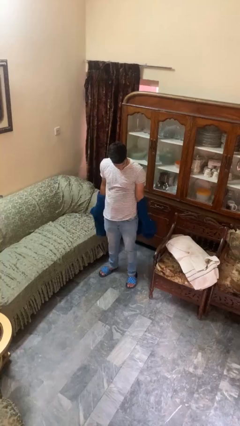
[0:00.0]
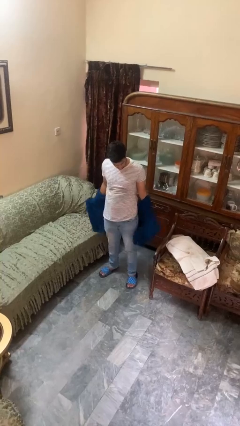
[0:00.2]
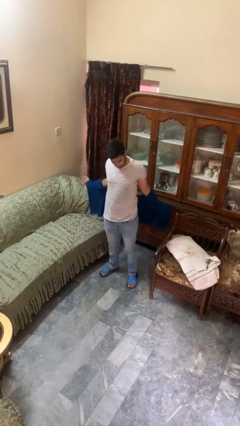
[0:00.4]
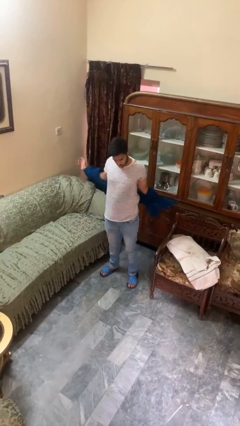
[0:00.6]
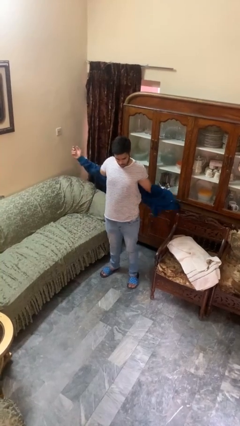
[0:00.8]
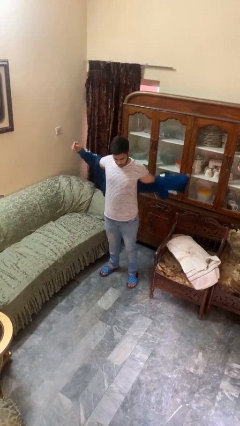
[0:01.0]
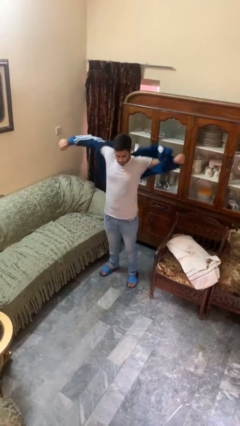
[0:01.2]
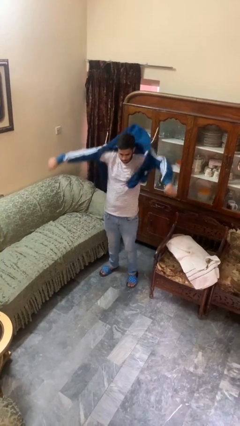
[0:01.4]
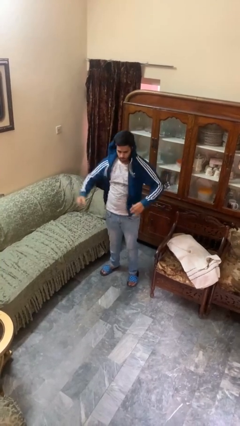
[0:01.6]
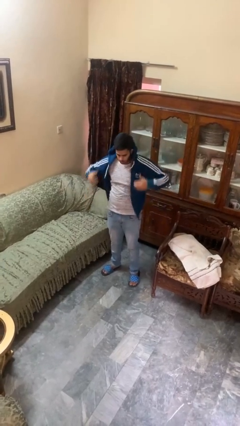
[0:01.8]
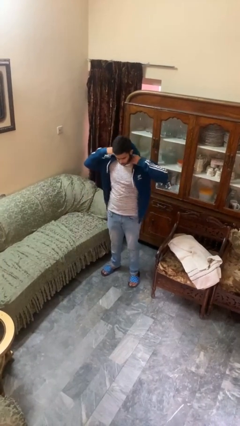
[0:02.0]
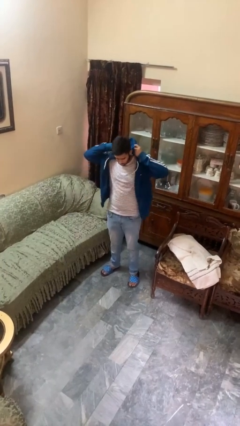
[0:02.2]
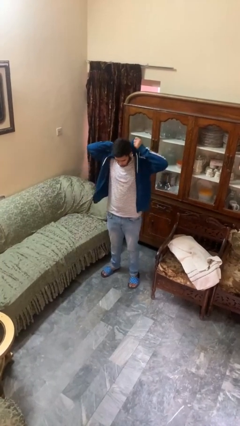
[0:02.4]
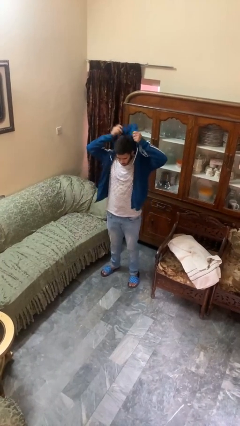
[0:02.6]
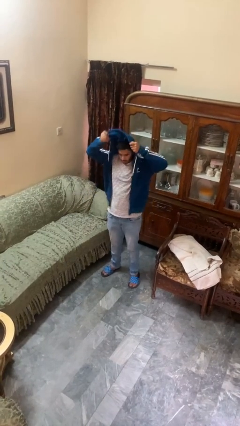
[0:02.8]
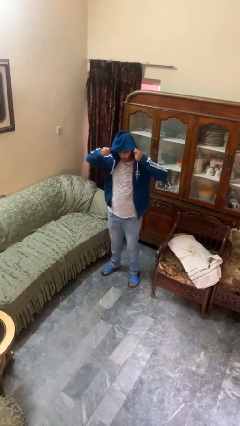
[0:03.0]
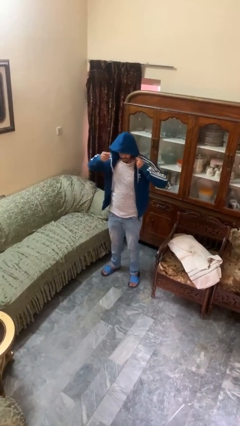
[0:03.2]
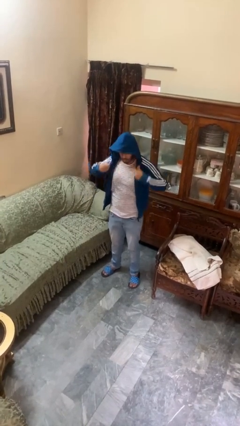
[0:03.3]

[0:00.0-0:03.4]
person puts on hoodie

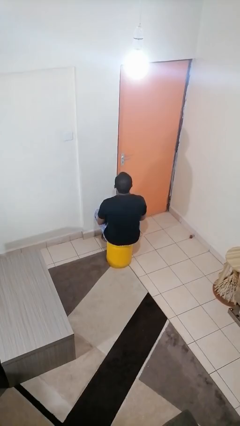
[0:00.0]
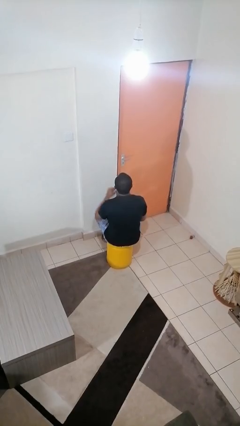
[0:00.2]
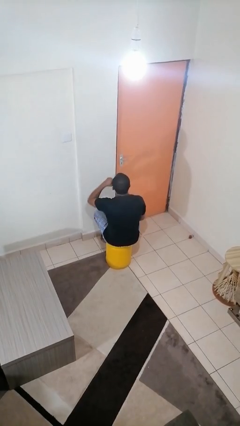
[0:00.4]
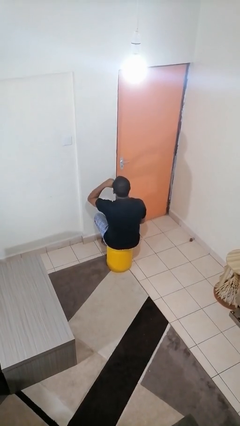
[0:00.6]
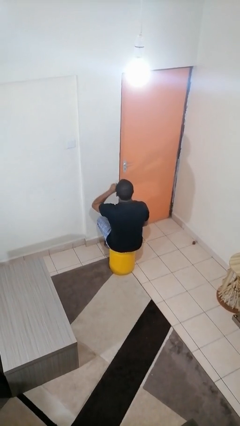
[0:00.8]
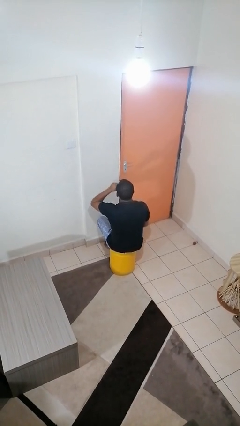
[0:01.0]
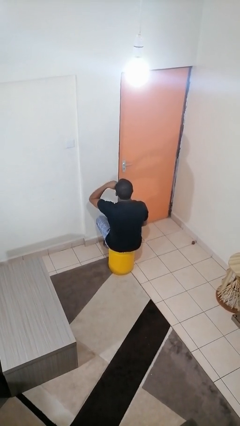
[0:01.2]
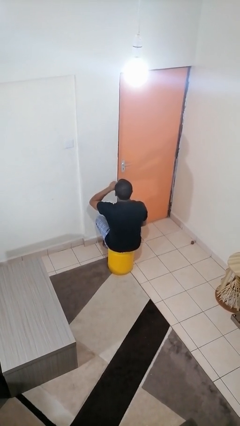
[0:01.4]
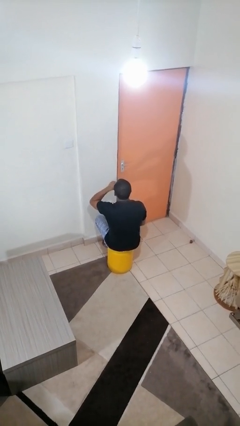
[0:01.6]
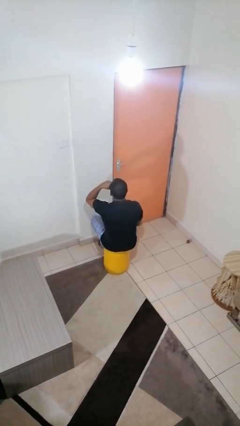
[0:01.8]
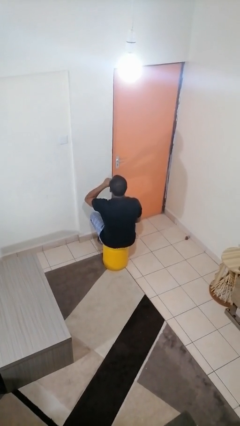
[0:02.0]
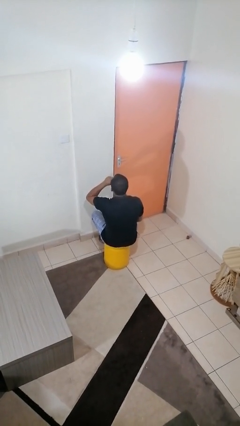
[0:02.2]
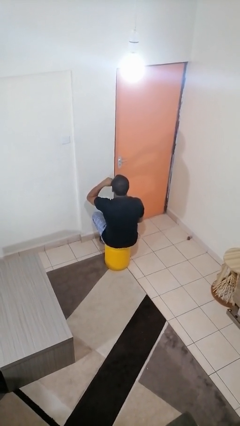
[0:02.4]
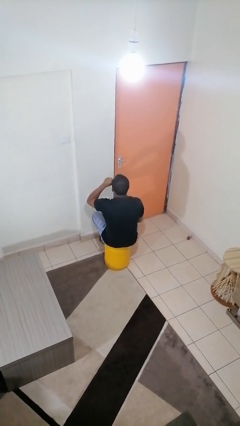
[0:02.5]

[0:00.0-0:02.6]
person rubs eyes

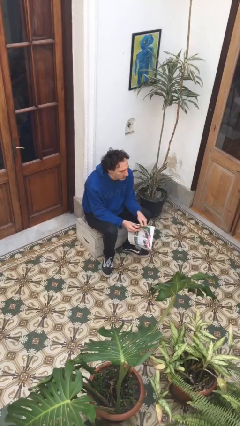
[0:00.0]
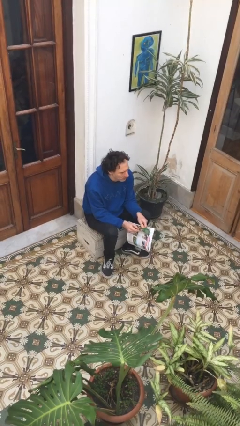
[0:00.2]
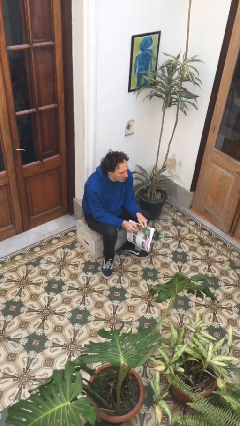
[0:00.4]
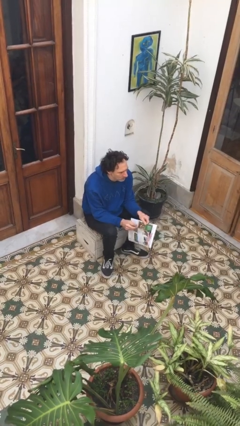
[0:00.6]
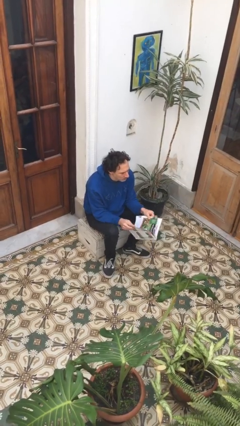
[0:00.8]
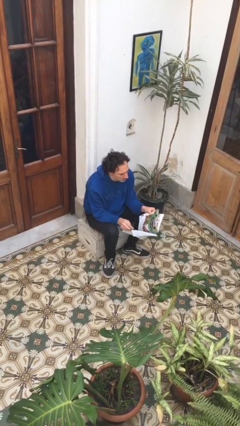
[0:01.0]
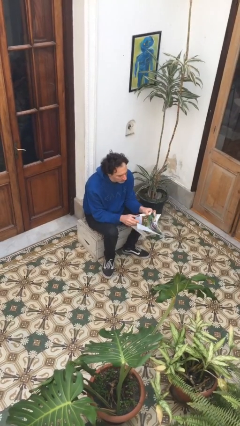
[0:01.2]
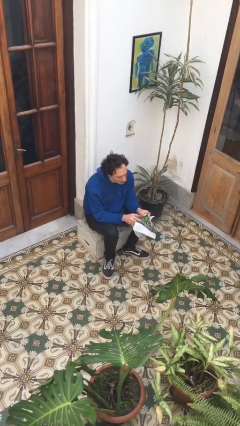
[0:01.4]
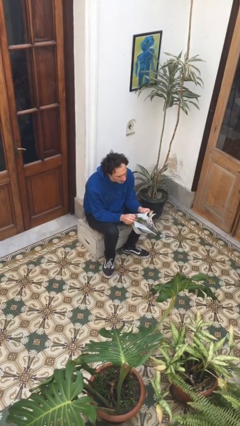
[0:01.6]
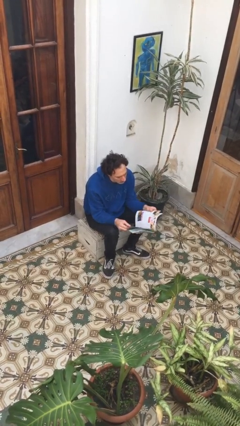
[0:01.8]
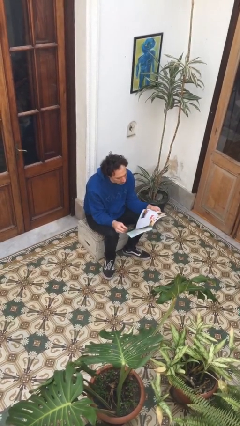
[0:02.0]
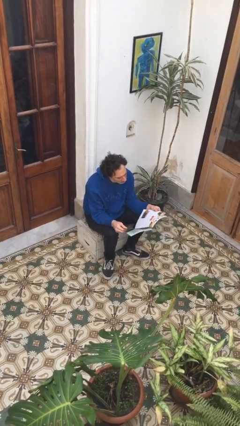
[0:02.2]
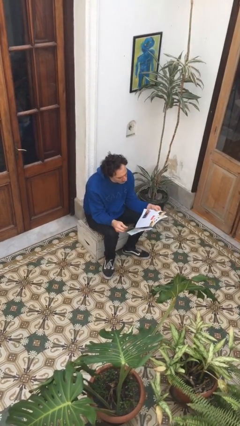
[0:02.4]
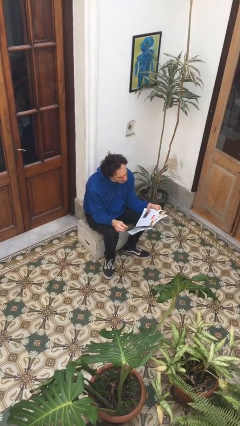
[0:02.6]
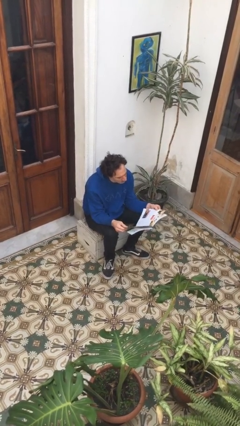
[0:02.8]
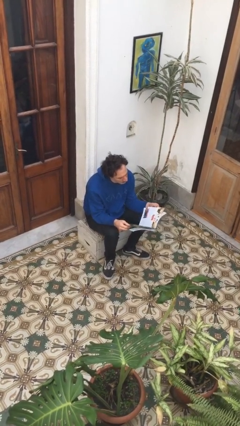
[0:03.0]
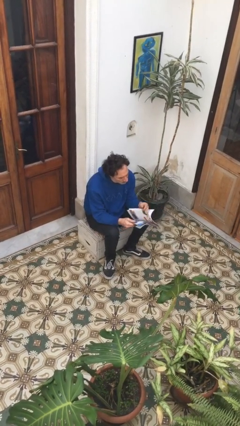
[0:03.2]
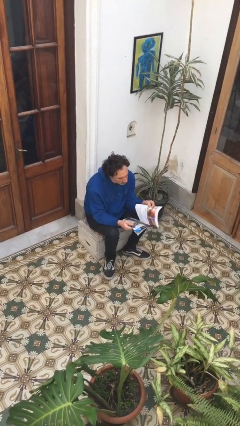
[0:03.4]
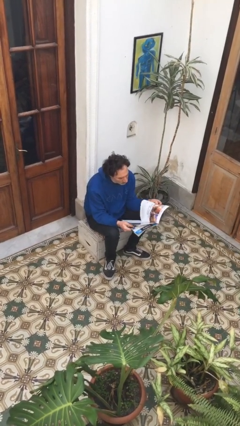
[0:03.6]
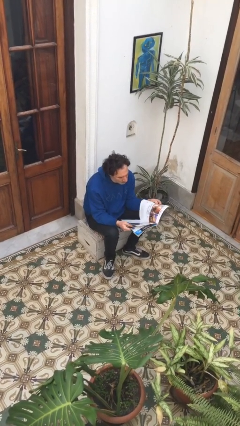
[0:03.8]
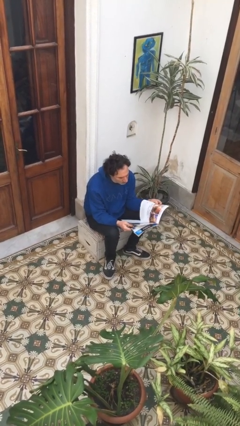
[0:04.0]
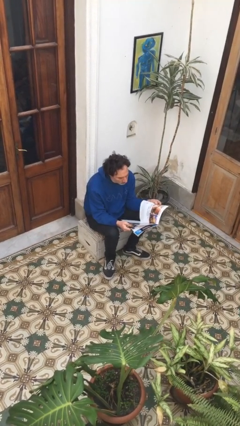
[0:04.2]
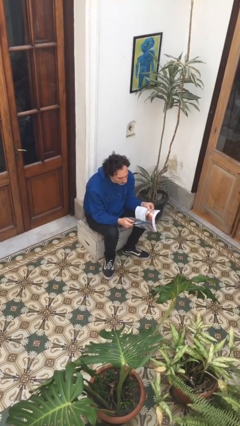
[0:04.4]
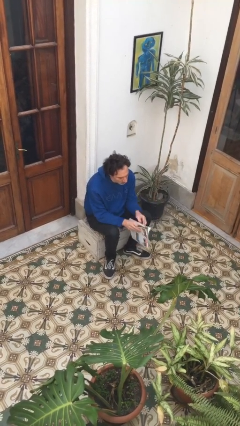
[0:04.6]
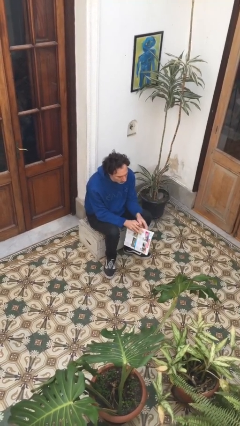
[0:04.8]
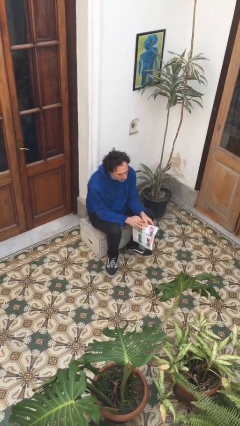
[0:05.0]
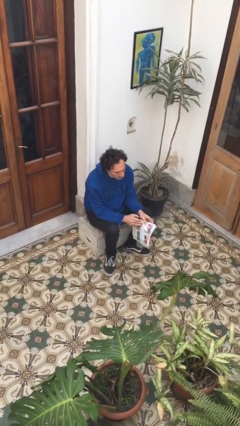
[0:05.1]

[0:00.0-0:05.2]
person reads magazine

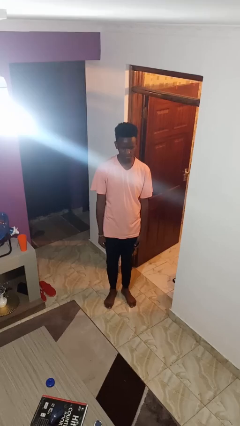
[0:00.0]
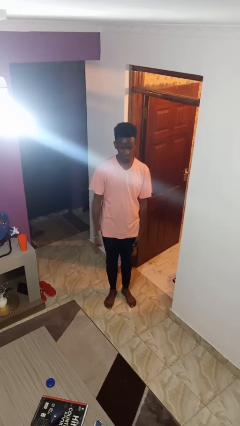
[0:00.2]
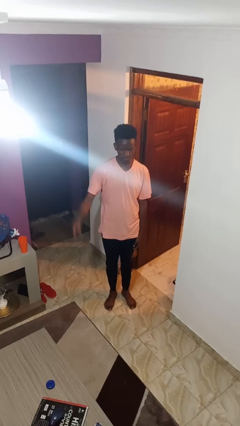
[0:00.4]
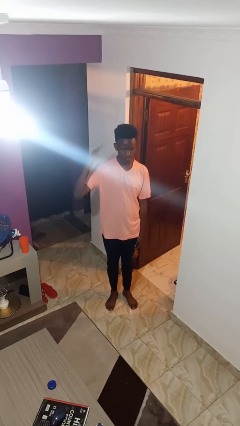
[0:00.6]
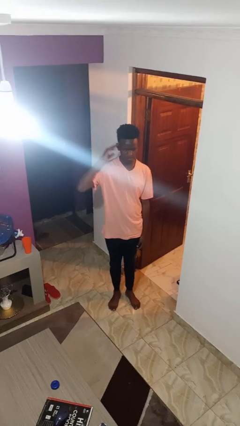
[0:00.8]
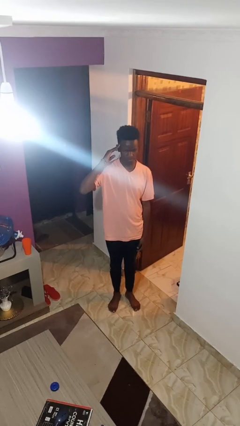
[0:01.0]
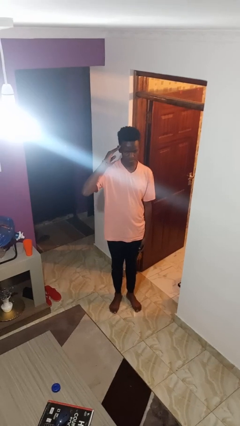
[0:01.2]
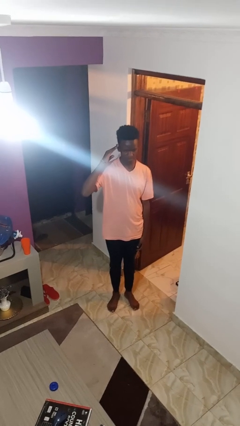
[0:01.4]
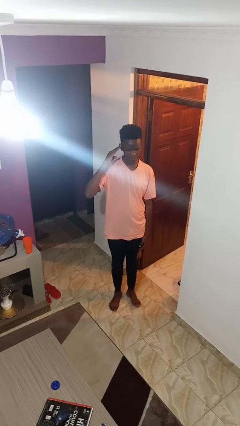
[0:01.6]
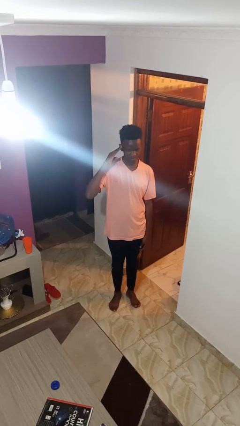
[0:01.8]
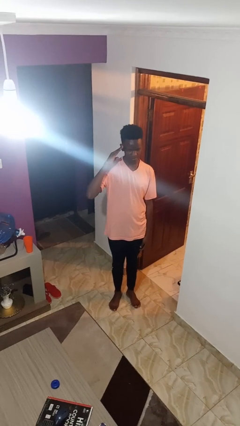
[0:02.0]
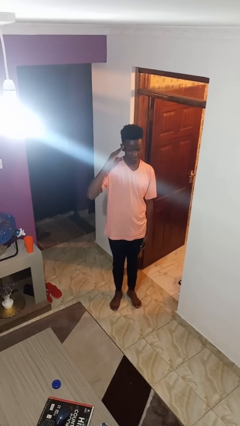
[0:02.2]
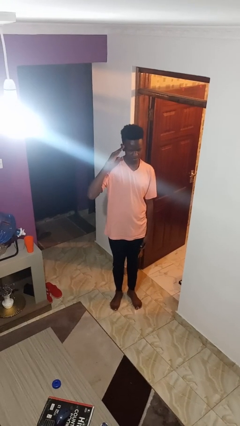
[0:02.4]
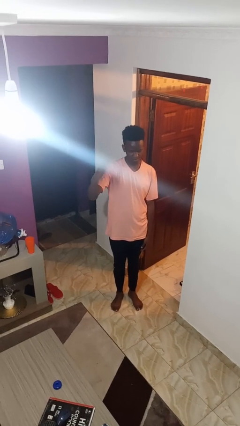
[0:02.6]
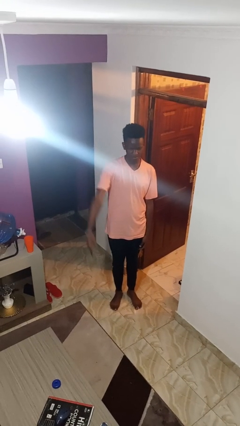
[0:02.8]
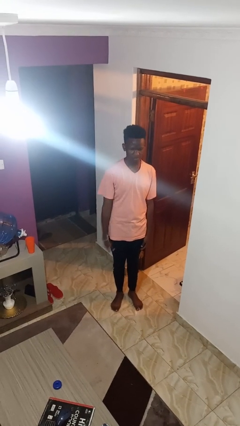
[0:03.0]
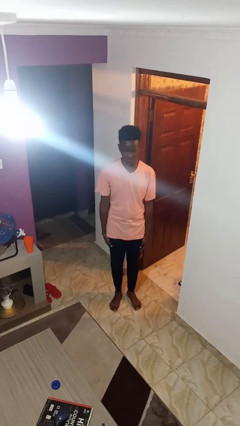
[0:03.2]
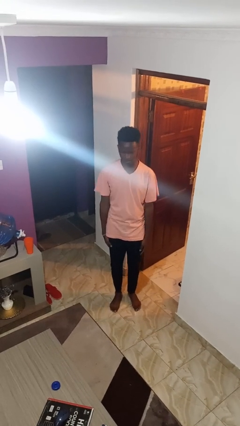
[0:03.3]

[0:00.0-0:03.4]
person salutes

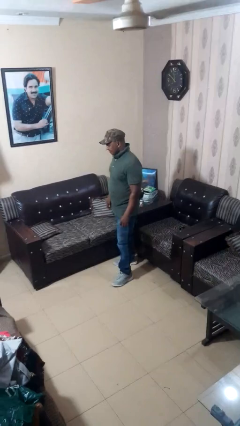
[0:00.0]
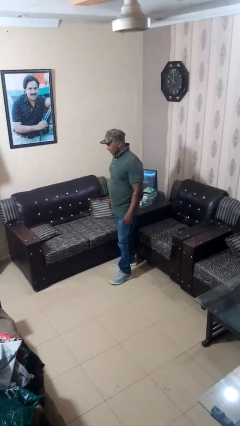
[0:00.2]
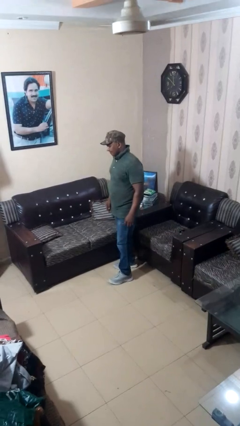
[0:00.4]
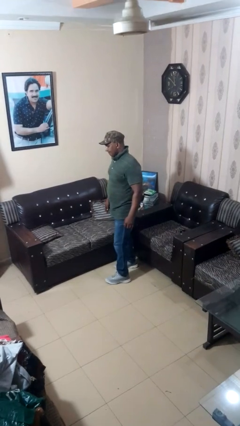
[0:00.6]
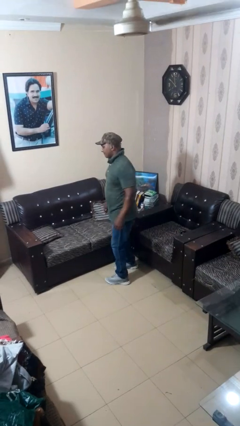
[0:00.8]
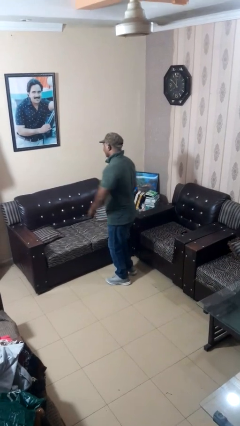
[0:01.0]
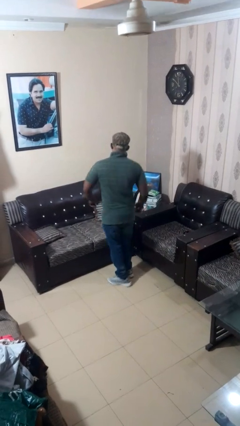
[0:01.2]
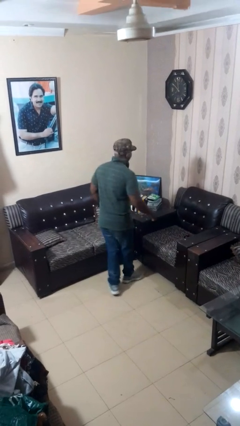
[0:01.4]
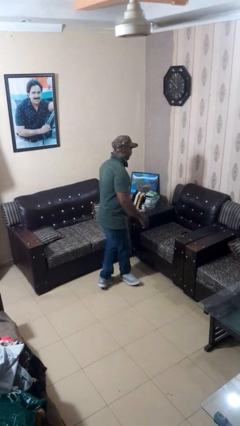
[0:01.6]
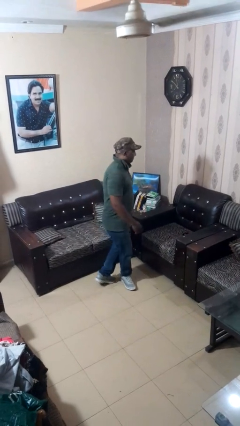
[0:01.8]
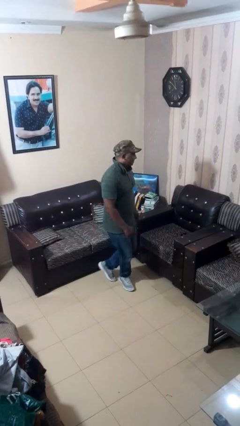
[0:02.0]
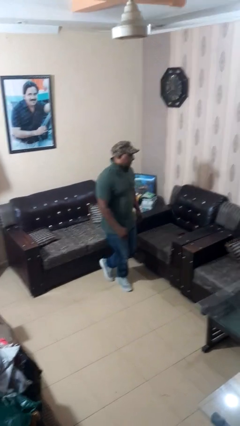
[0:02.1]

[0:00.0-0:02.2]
person twirls

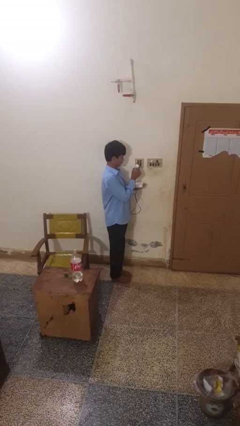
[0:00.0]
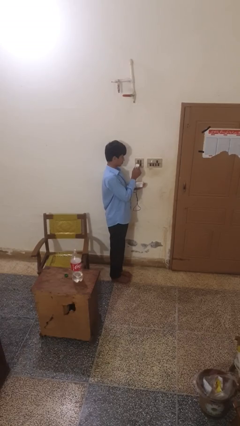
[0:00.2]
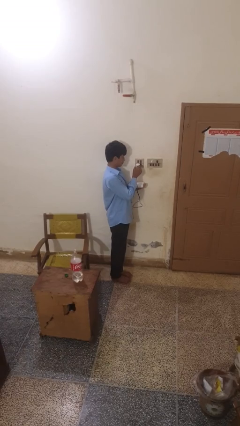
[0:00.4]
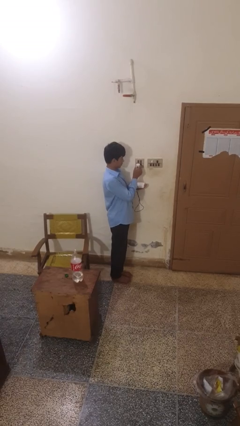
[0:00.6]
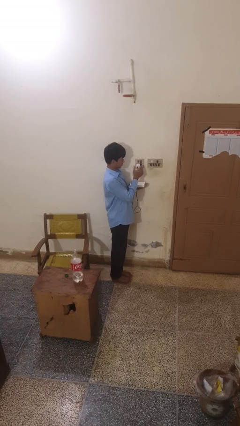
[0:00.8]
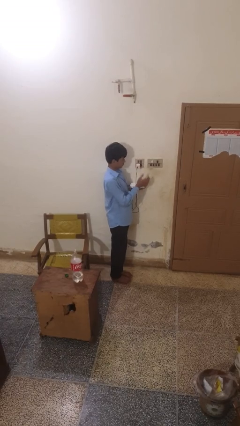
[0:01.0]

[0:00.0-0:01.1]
person plugs into electrical socket
